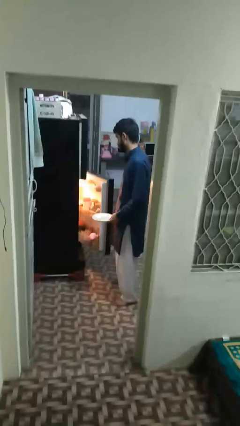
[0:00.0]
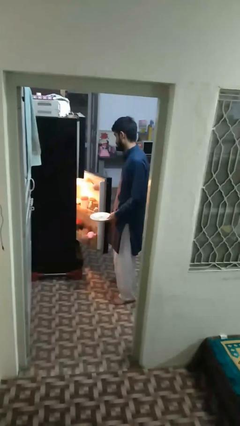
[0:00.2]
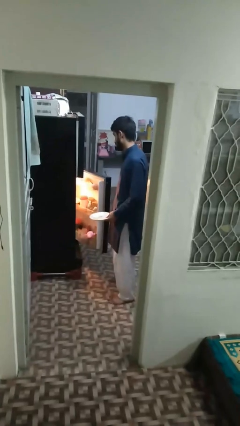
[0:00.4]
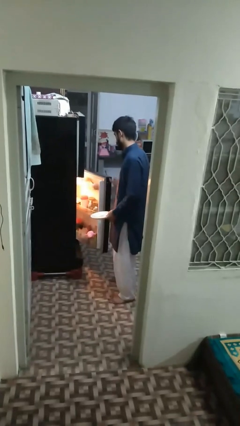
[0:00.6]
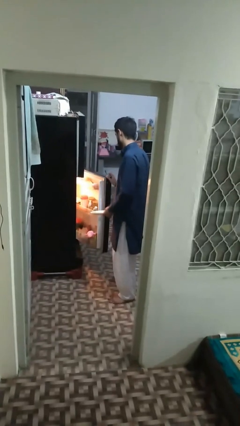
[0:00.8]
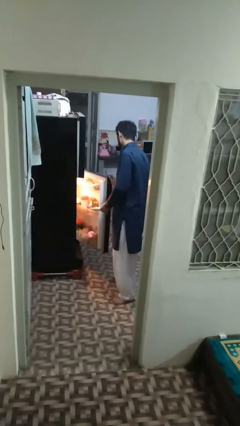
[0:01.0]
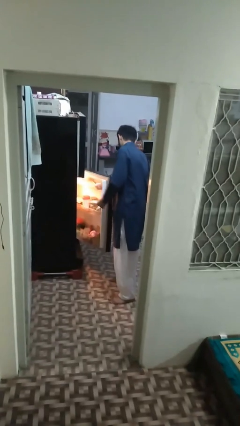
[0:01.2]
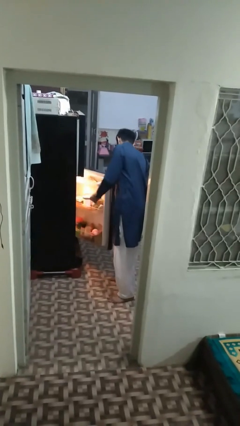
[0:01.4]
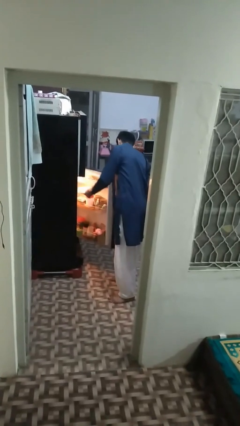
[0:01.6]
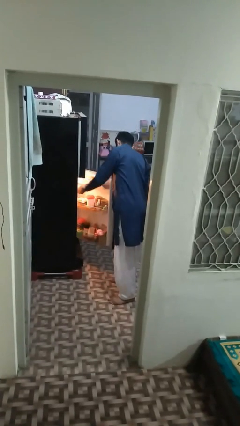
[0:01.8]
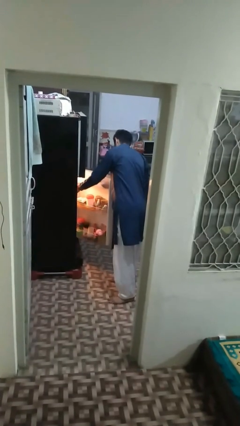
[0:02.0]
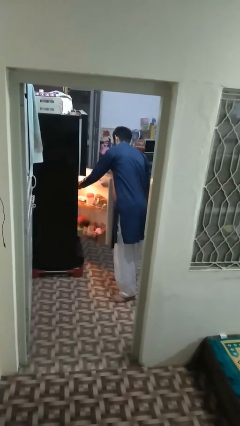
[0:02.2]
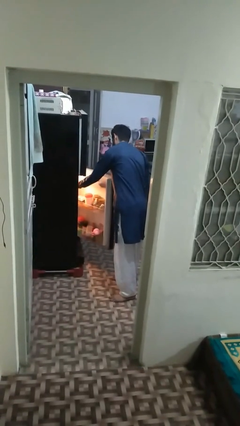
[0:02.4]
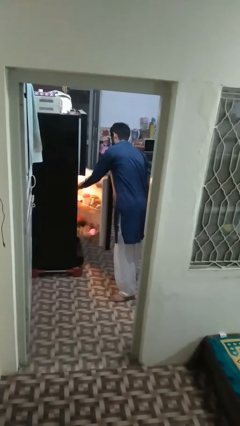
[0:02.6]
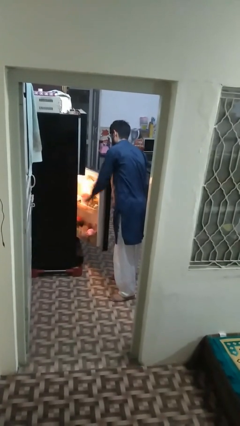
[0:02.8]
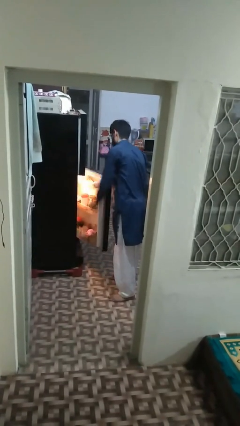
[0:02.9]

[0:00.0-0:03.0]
person puts object into refrigerator

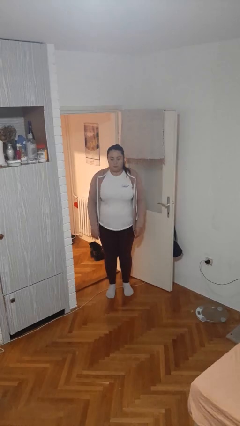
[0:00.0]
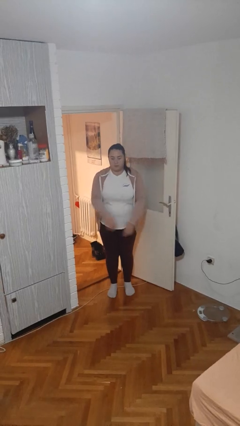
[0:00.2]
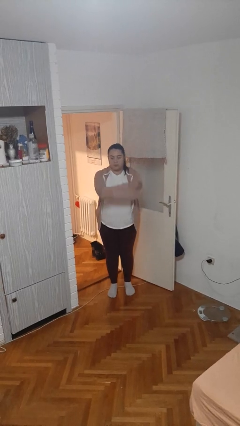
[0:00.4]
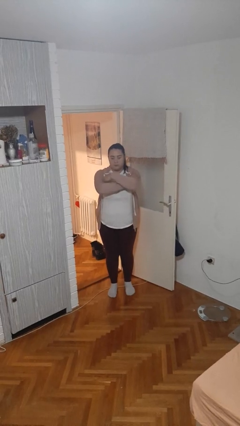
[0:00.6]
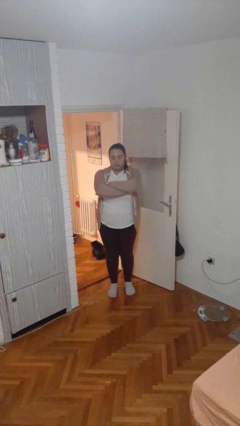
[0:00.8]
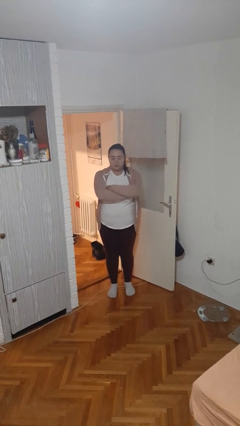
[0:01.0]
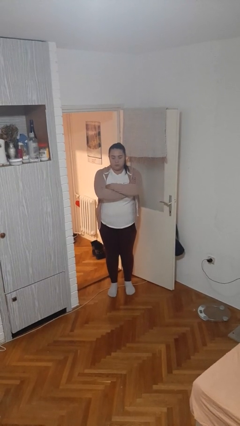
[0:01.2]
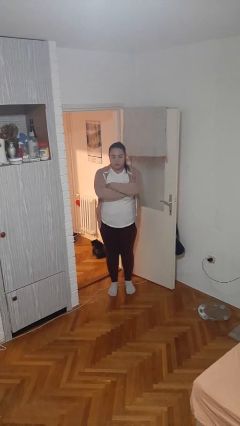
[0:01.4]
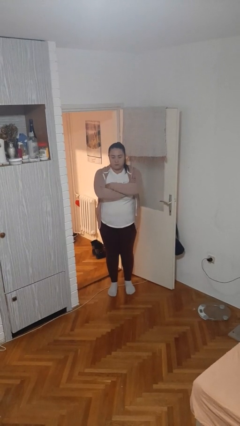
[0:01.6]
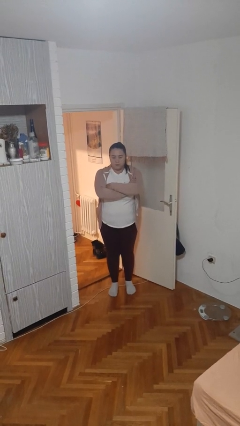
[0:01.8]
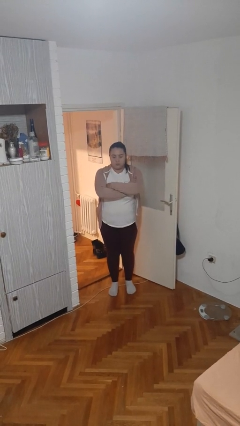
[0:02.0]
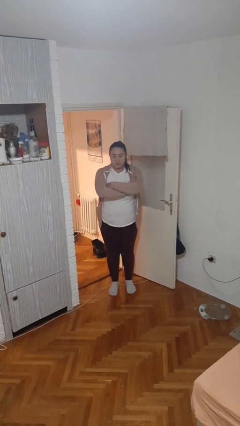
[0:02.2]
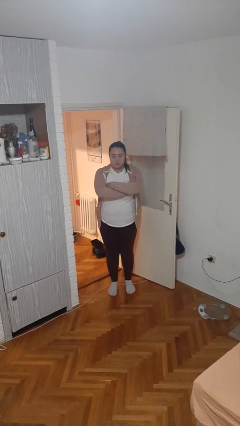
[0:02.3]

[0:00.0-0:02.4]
person crosses arms

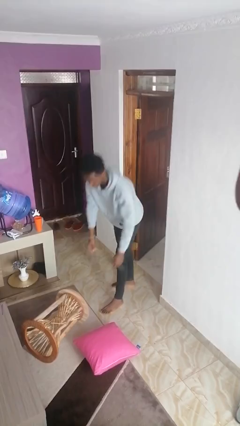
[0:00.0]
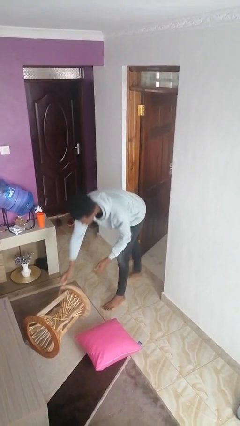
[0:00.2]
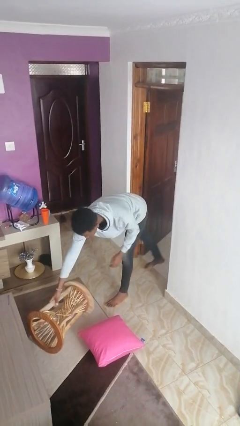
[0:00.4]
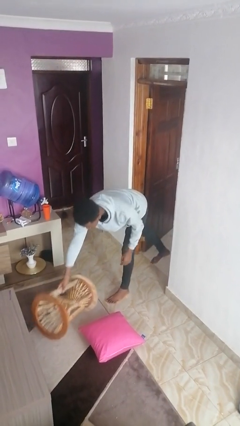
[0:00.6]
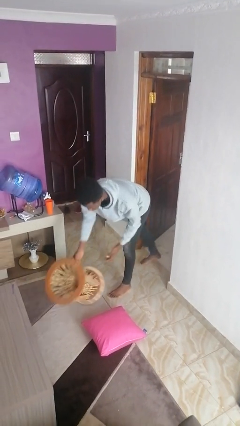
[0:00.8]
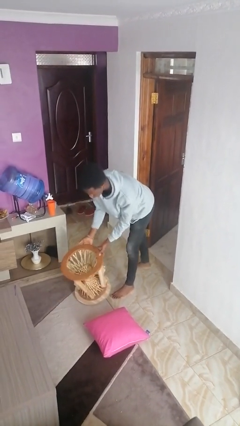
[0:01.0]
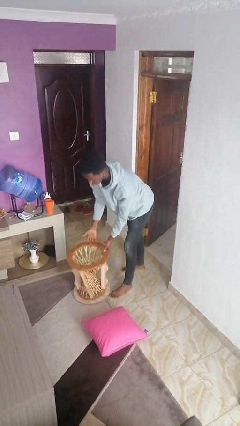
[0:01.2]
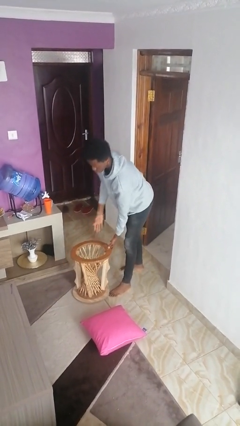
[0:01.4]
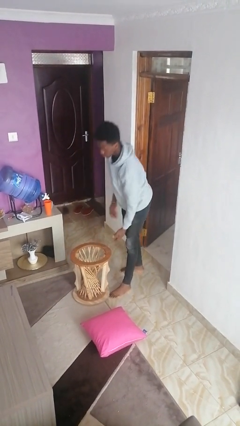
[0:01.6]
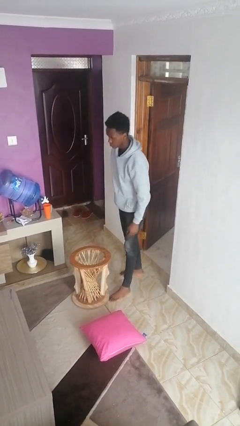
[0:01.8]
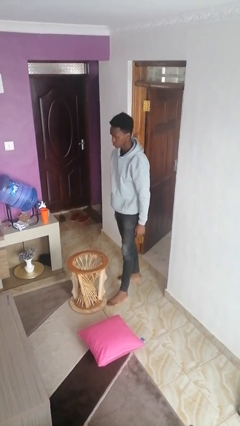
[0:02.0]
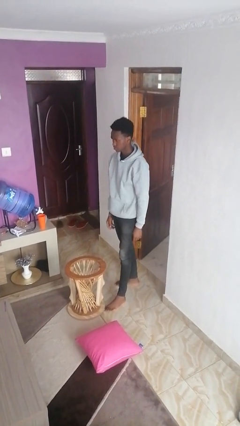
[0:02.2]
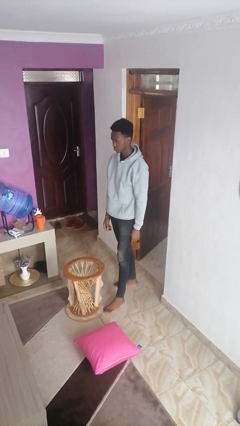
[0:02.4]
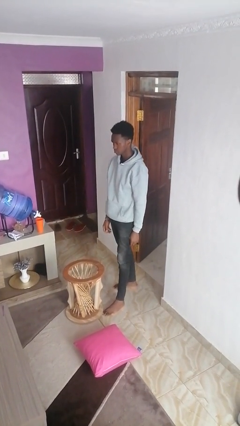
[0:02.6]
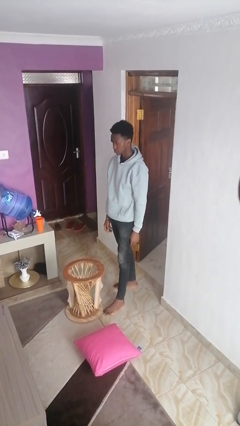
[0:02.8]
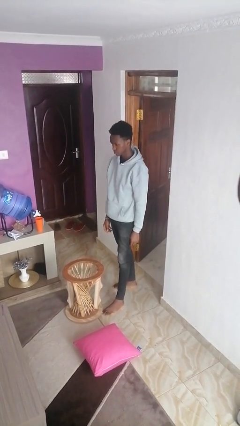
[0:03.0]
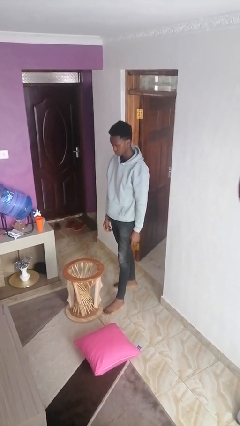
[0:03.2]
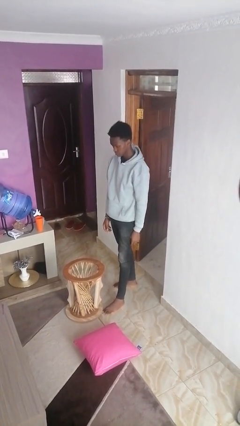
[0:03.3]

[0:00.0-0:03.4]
person sets upright furniture

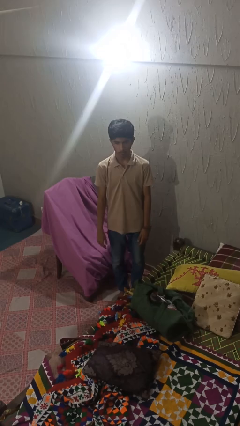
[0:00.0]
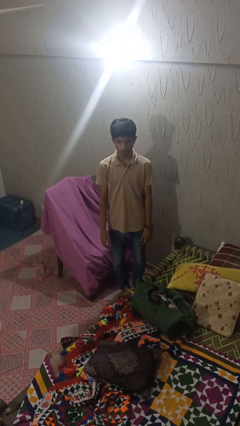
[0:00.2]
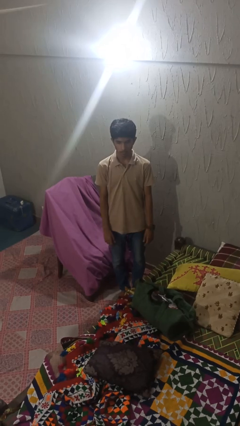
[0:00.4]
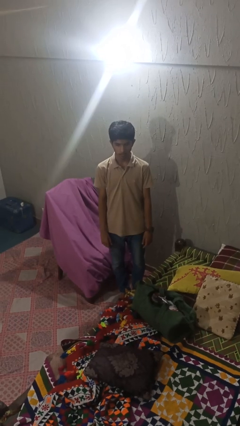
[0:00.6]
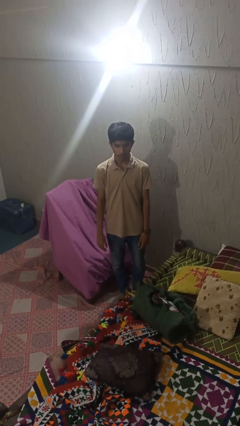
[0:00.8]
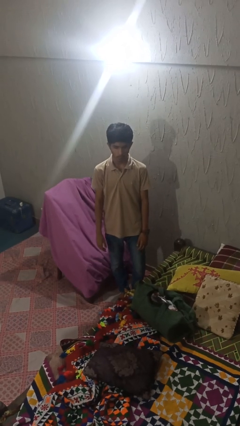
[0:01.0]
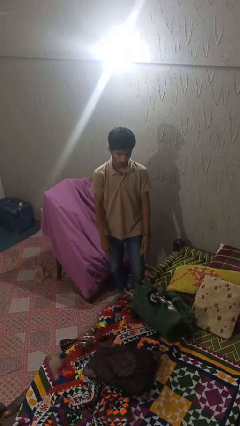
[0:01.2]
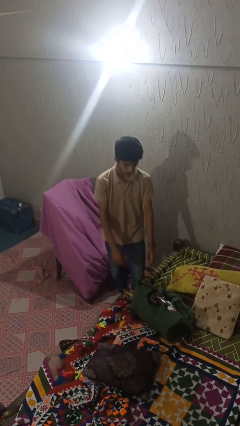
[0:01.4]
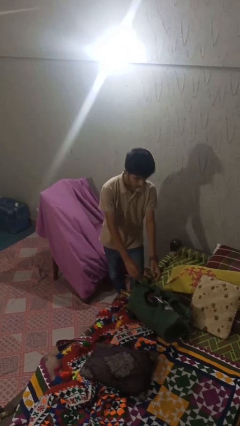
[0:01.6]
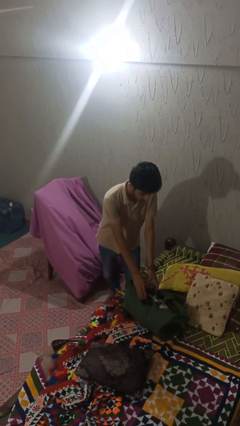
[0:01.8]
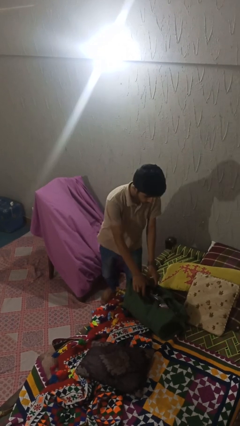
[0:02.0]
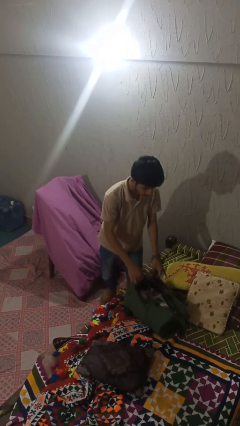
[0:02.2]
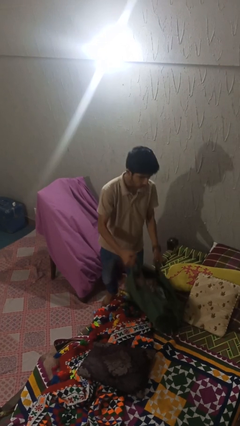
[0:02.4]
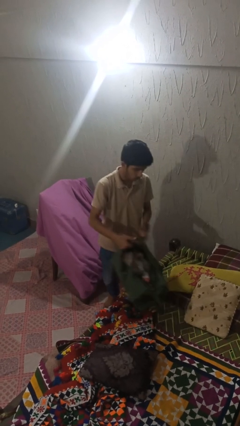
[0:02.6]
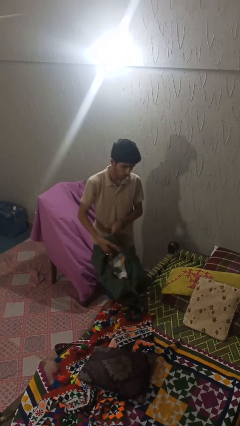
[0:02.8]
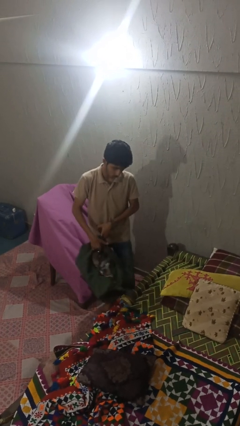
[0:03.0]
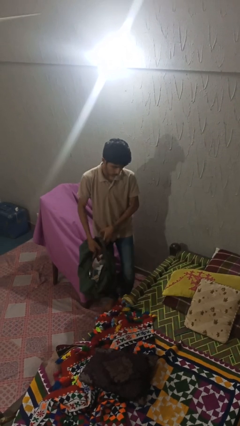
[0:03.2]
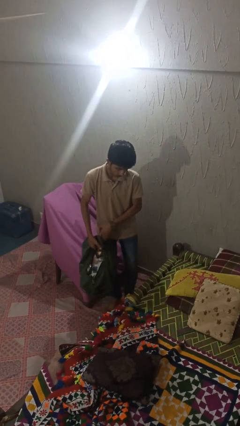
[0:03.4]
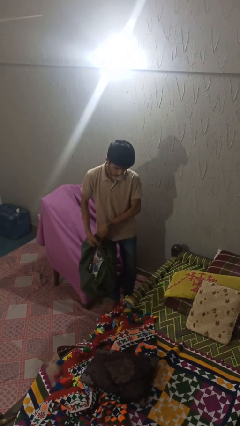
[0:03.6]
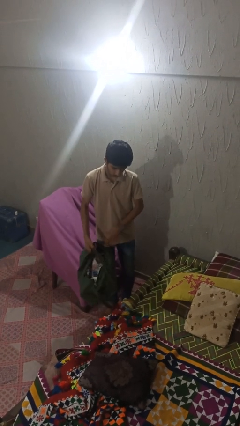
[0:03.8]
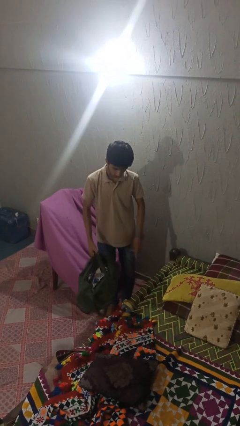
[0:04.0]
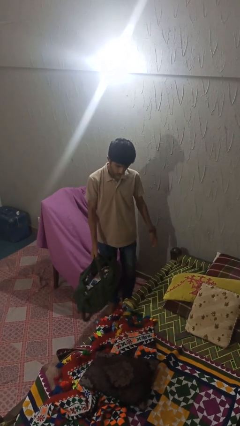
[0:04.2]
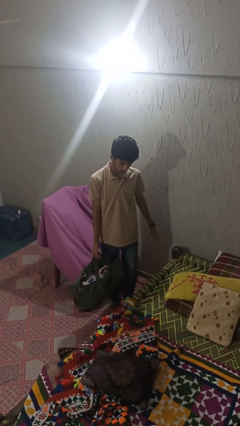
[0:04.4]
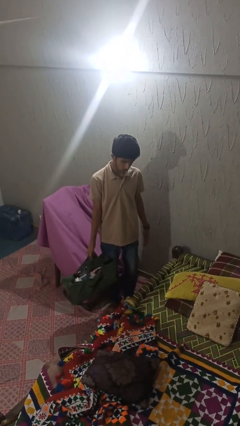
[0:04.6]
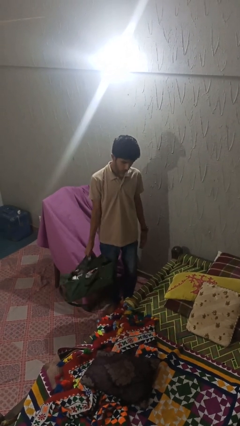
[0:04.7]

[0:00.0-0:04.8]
person picks up object from bed

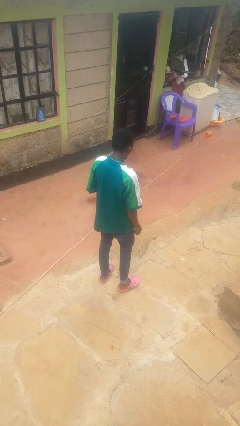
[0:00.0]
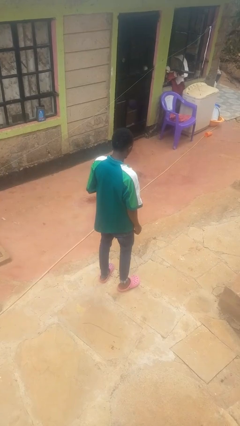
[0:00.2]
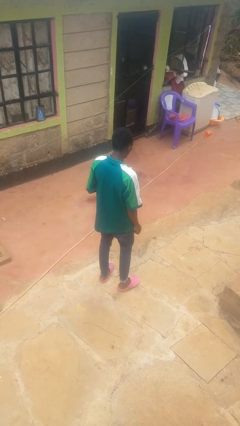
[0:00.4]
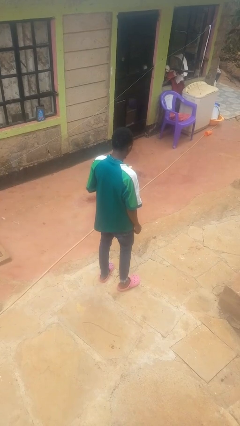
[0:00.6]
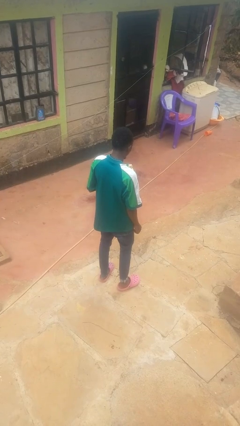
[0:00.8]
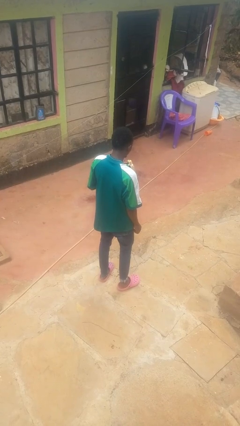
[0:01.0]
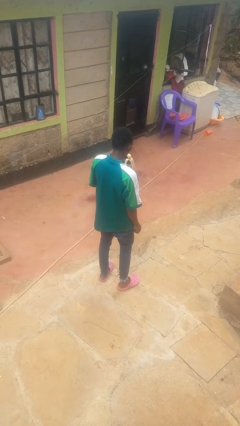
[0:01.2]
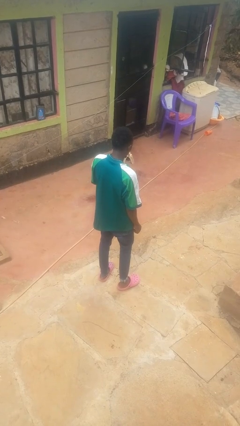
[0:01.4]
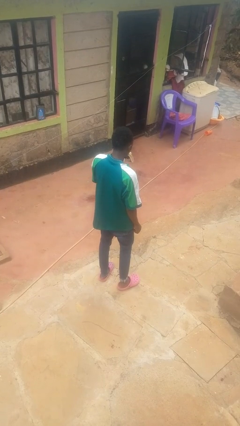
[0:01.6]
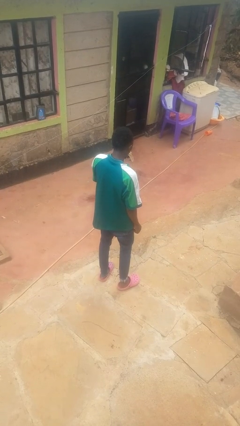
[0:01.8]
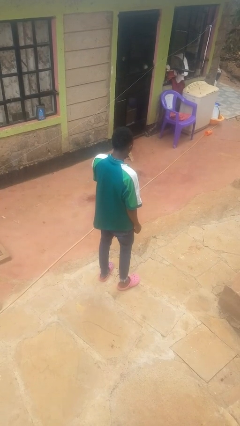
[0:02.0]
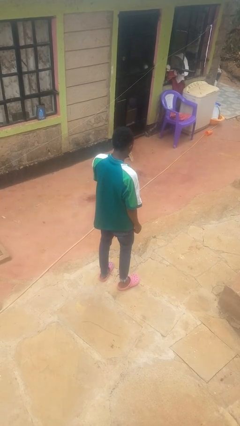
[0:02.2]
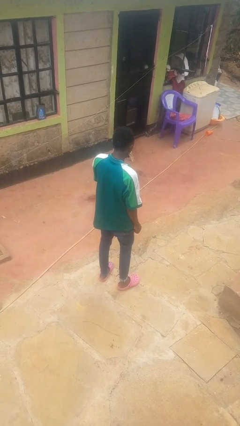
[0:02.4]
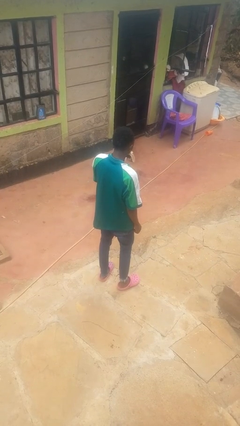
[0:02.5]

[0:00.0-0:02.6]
person eats banana

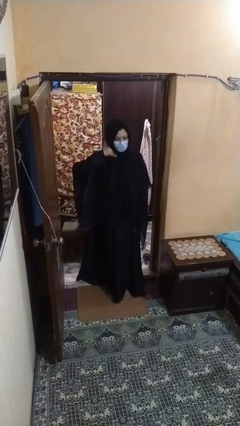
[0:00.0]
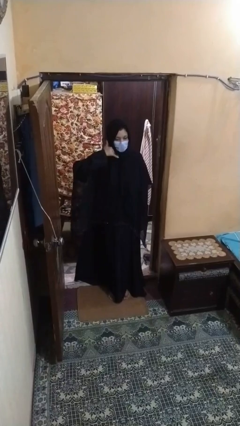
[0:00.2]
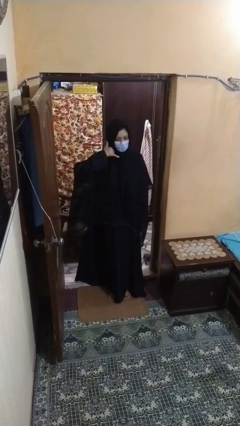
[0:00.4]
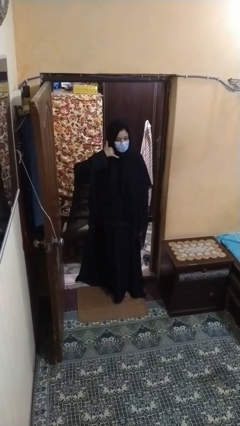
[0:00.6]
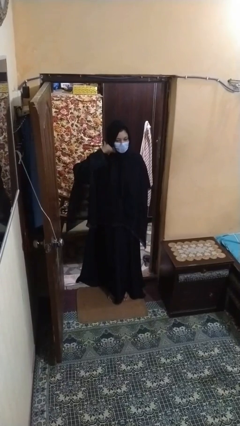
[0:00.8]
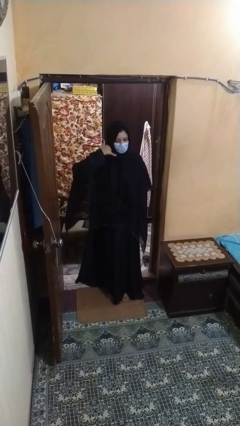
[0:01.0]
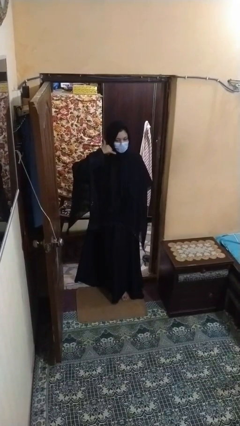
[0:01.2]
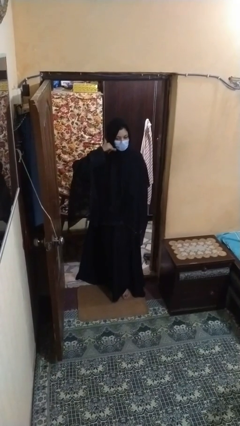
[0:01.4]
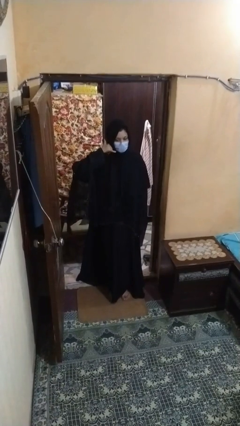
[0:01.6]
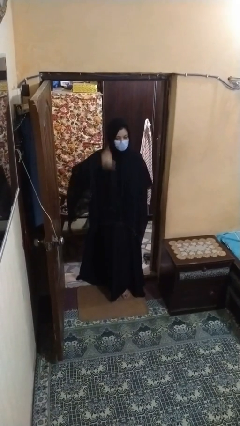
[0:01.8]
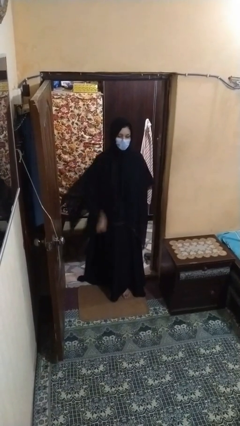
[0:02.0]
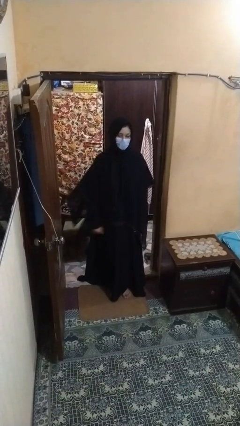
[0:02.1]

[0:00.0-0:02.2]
person gestures call me
